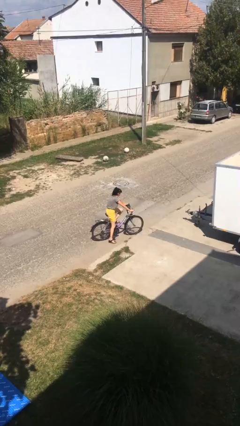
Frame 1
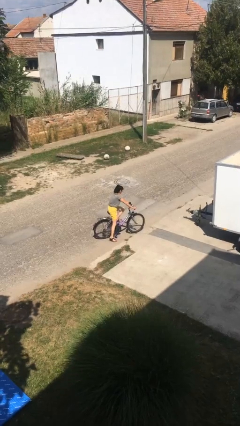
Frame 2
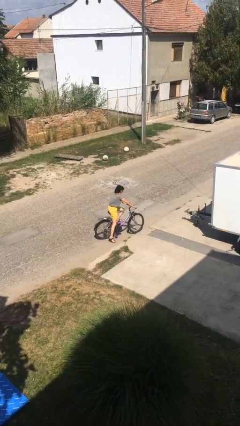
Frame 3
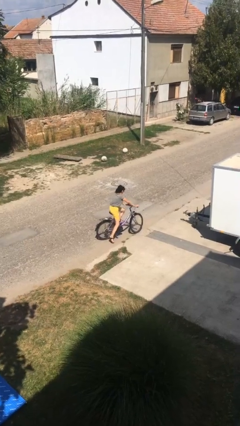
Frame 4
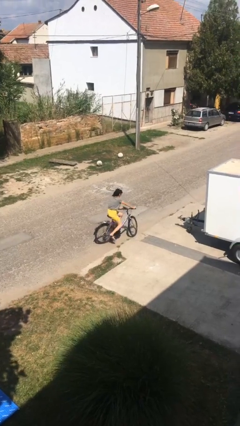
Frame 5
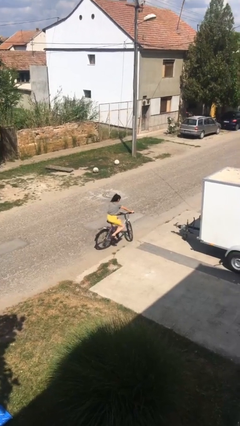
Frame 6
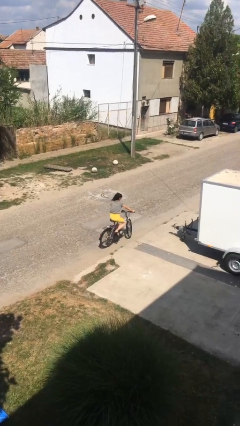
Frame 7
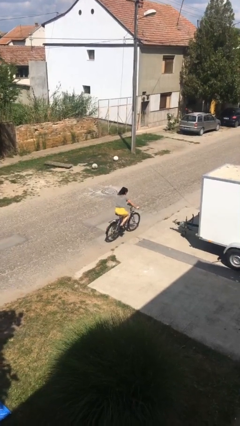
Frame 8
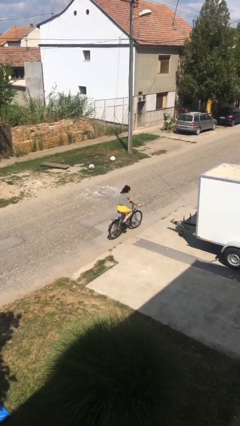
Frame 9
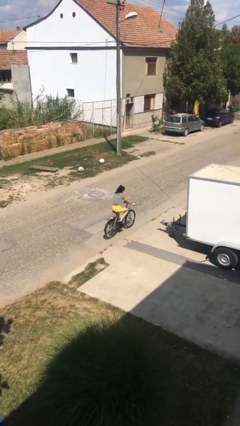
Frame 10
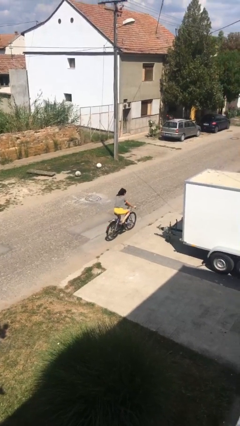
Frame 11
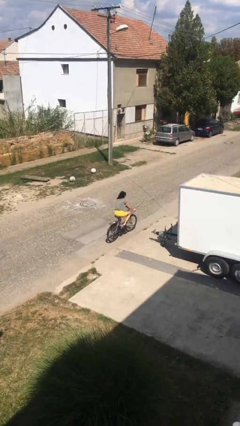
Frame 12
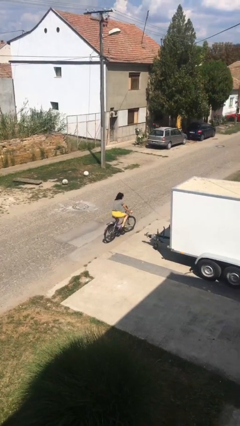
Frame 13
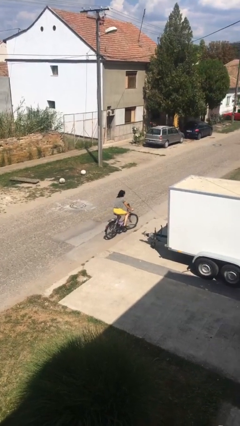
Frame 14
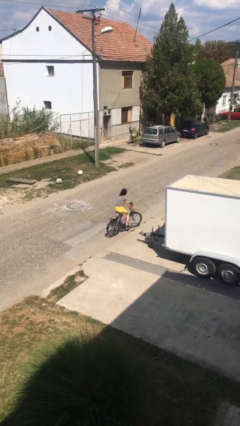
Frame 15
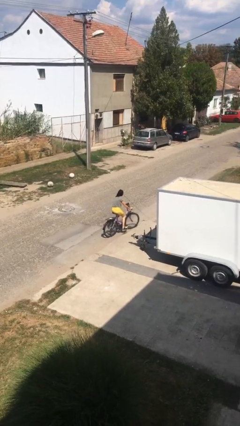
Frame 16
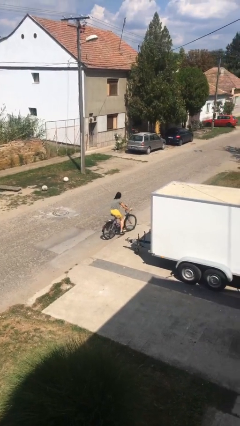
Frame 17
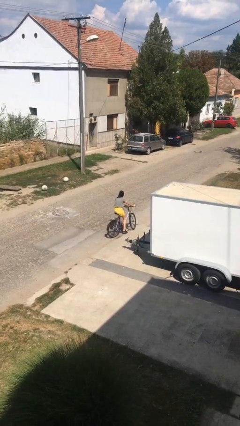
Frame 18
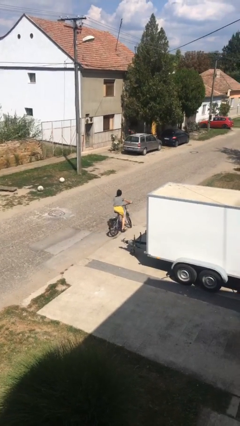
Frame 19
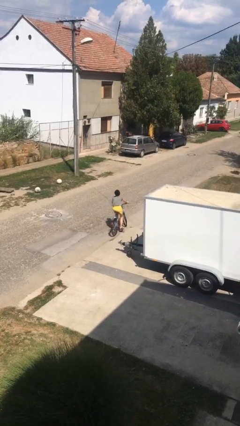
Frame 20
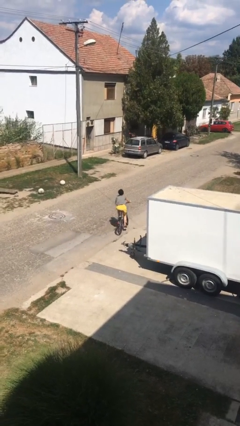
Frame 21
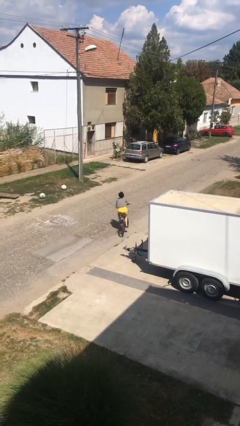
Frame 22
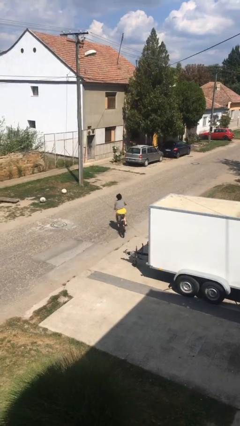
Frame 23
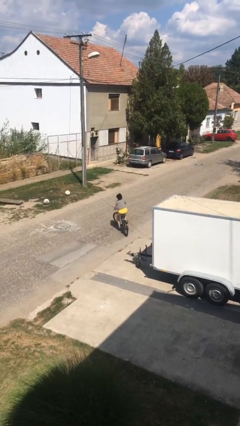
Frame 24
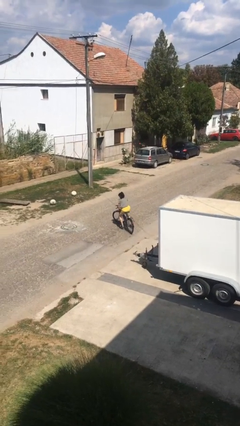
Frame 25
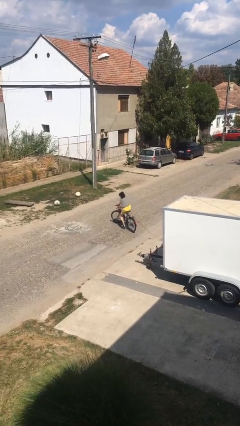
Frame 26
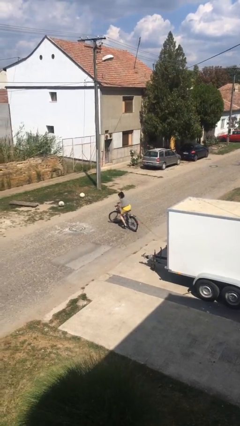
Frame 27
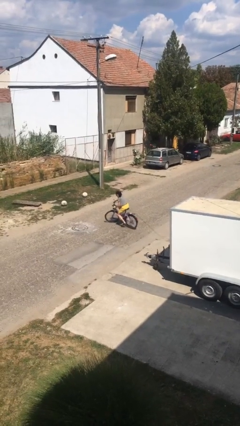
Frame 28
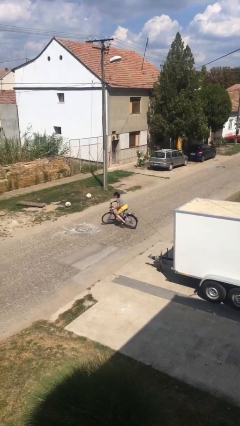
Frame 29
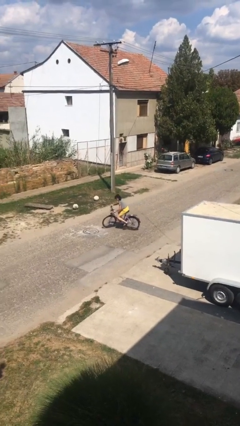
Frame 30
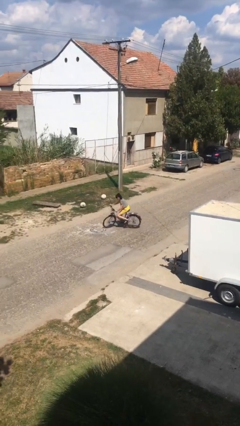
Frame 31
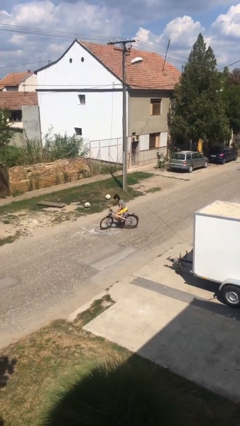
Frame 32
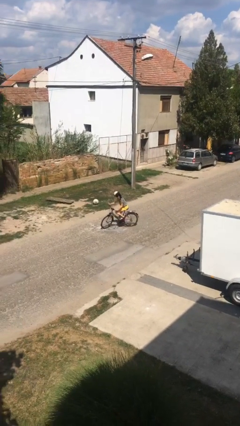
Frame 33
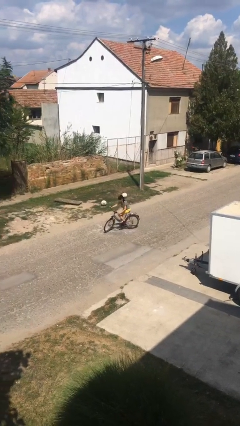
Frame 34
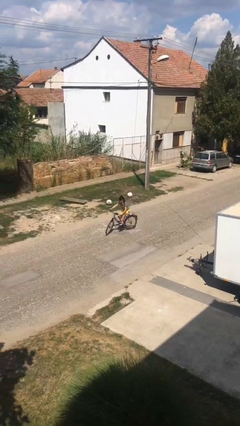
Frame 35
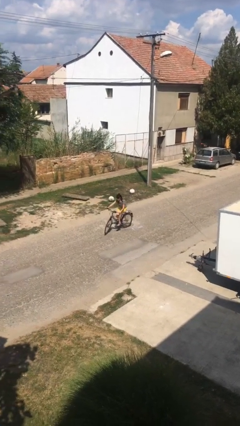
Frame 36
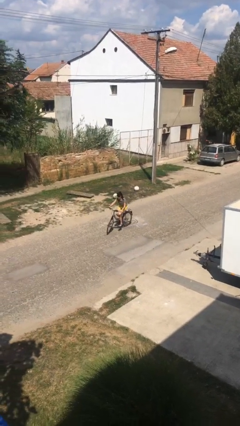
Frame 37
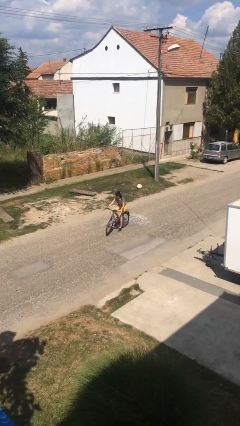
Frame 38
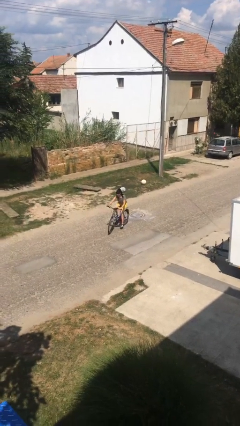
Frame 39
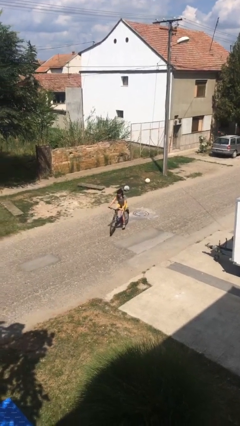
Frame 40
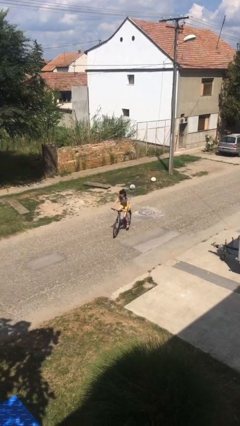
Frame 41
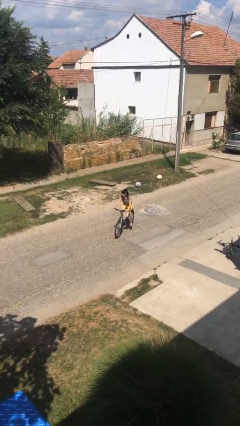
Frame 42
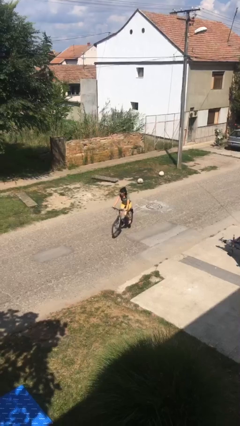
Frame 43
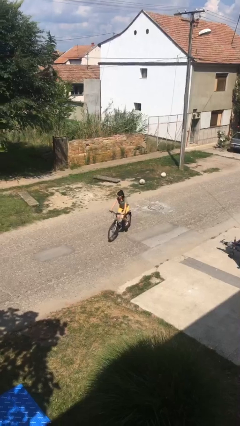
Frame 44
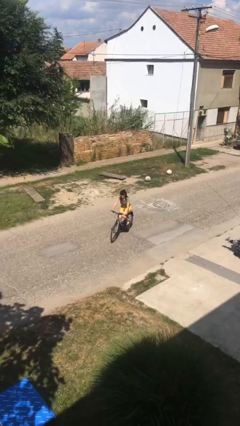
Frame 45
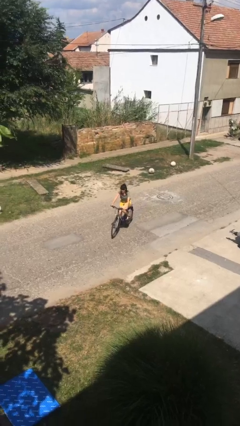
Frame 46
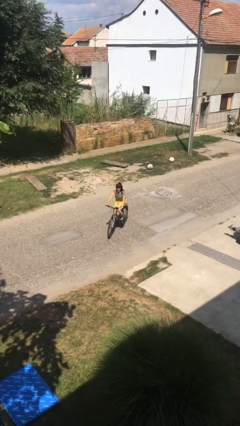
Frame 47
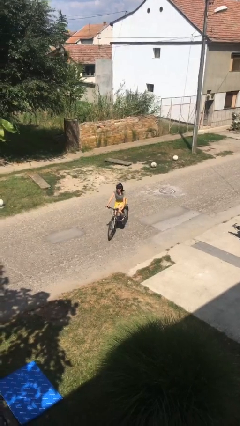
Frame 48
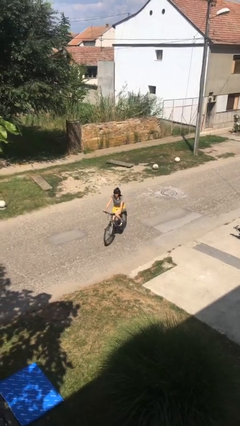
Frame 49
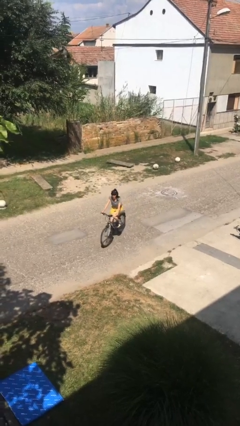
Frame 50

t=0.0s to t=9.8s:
person rides bicycle

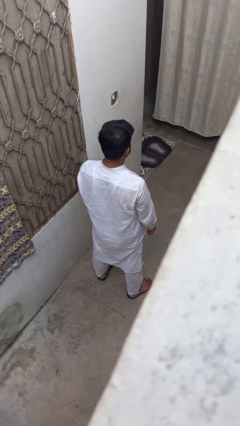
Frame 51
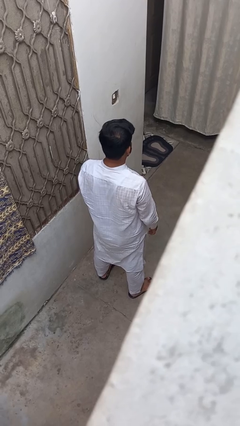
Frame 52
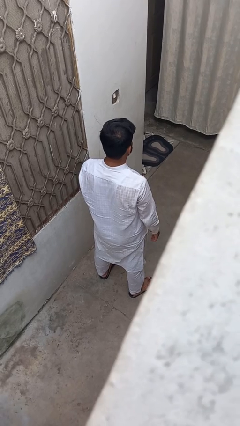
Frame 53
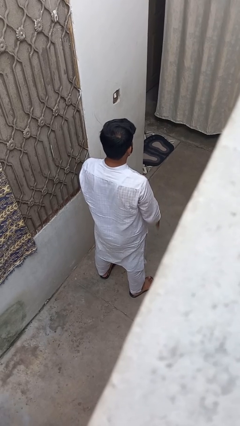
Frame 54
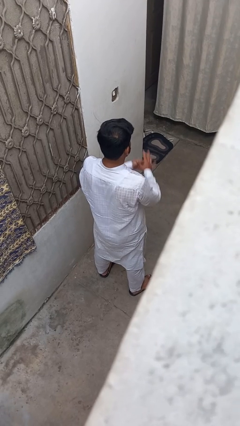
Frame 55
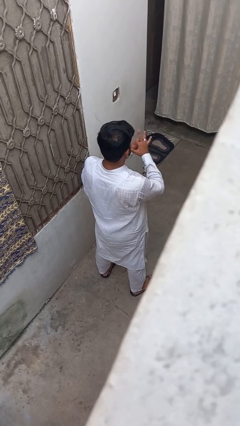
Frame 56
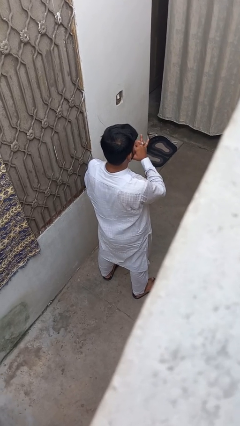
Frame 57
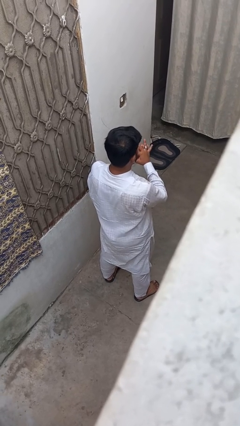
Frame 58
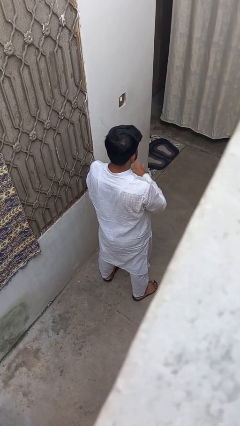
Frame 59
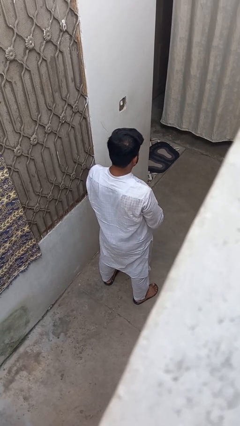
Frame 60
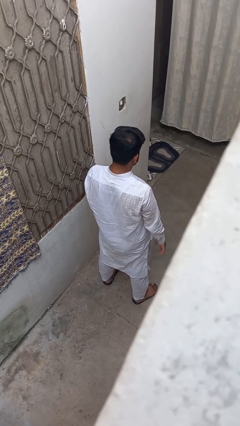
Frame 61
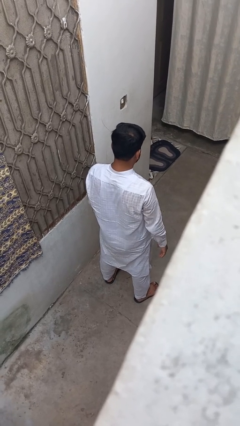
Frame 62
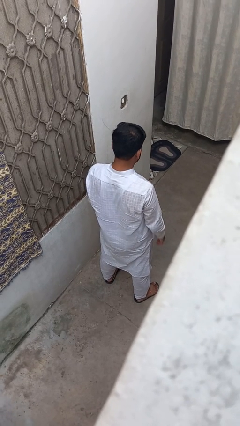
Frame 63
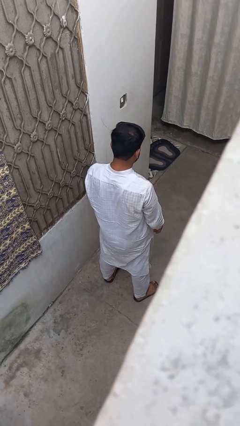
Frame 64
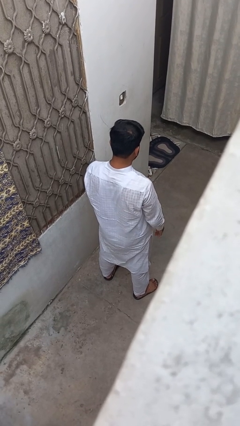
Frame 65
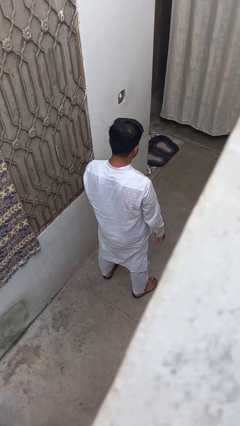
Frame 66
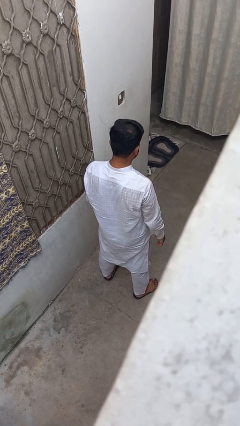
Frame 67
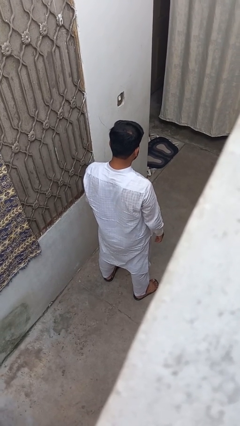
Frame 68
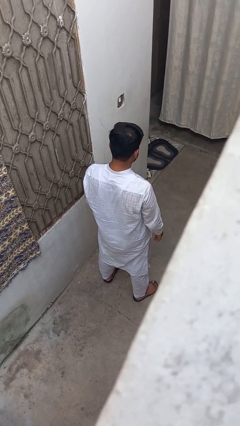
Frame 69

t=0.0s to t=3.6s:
person takes off ring

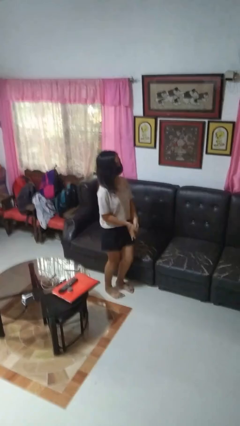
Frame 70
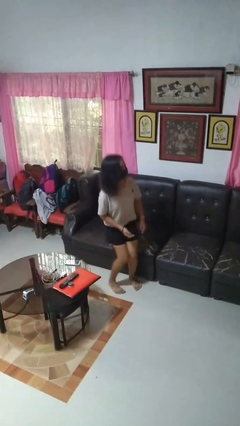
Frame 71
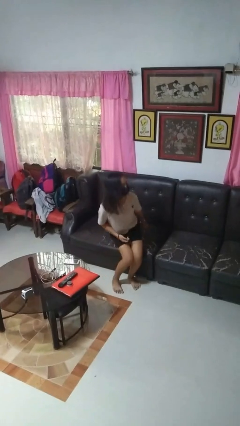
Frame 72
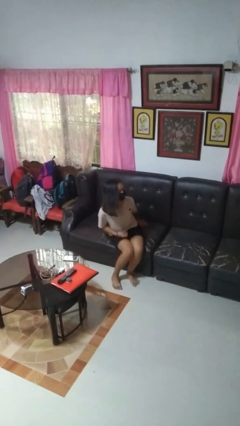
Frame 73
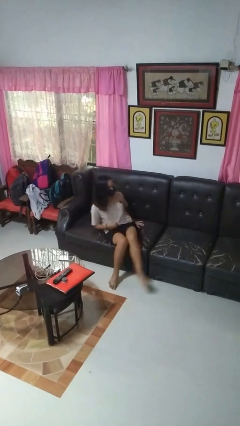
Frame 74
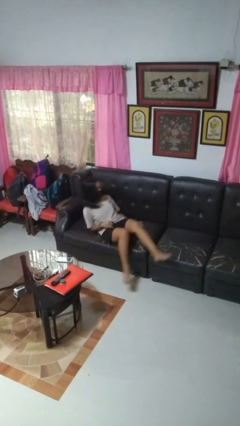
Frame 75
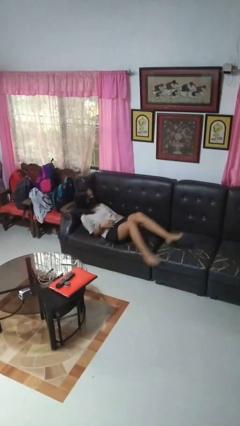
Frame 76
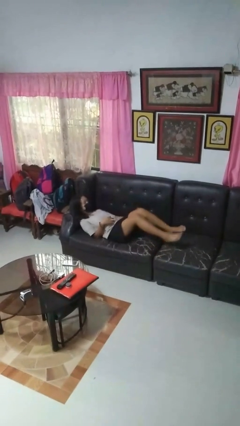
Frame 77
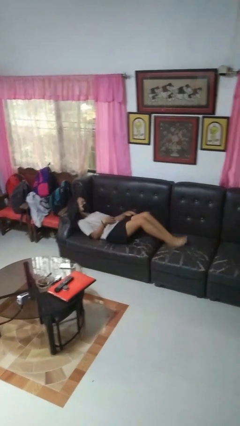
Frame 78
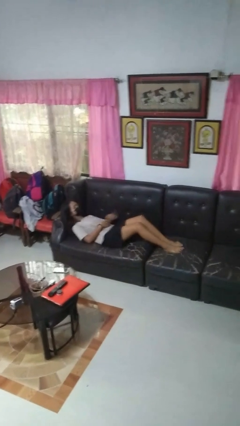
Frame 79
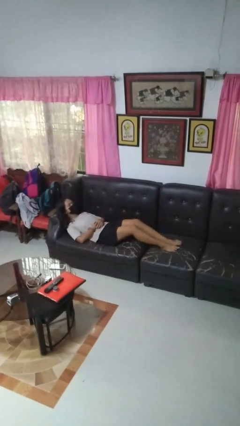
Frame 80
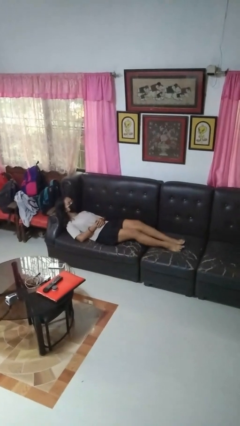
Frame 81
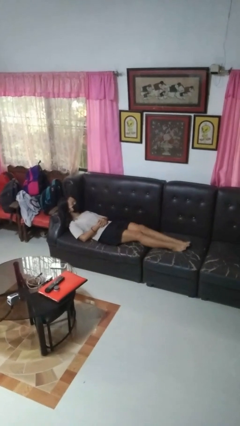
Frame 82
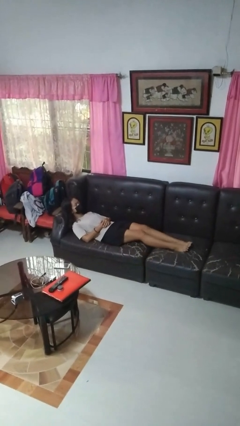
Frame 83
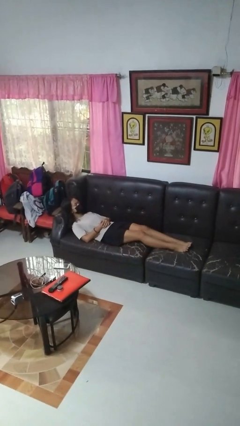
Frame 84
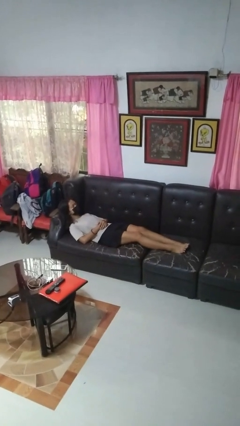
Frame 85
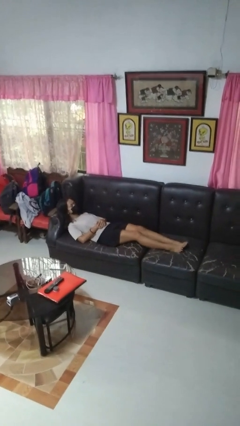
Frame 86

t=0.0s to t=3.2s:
person lies down on couch

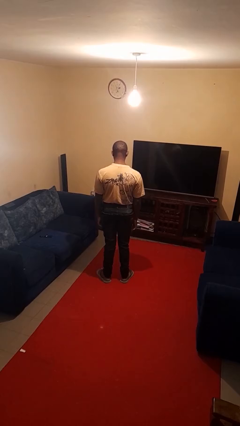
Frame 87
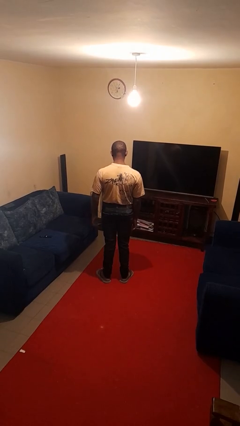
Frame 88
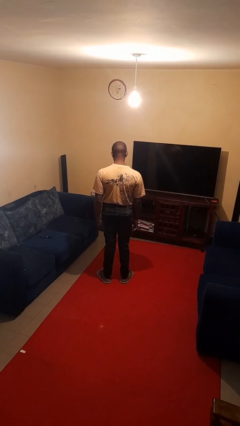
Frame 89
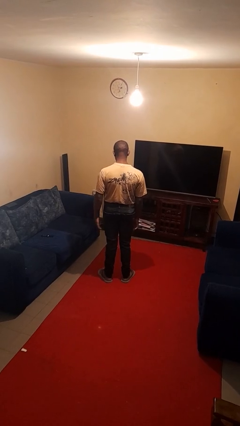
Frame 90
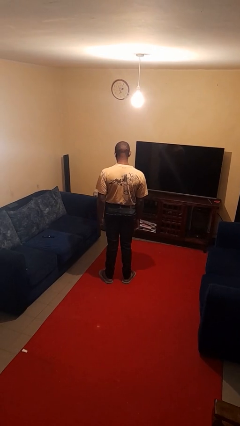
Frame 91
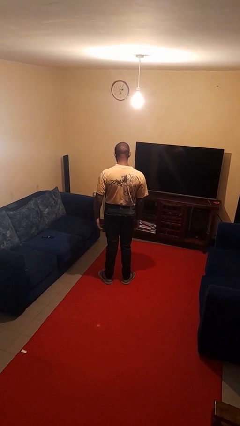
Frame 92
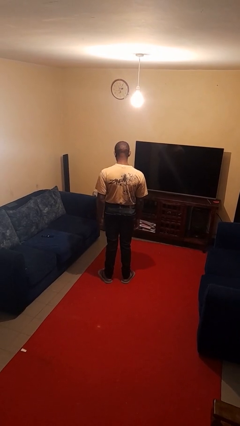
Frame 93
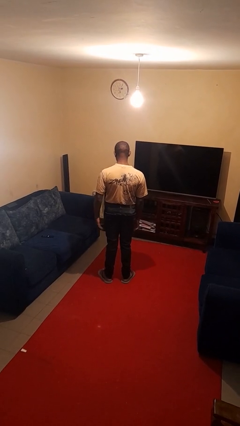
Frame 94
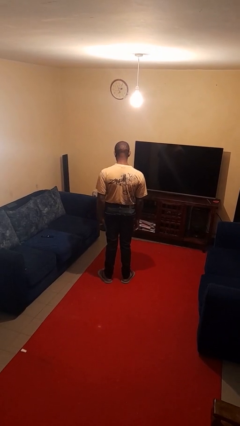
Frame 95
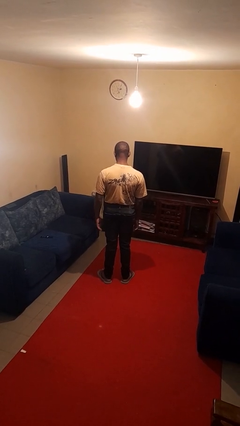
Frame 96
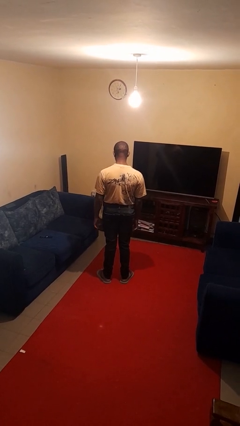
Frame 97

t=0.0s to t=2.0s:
person slaps hands on thighs
